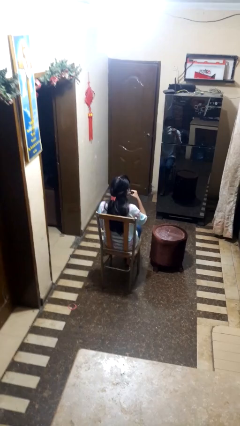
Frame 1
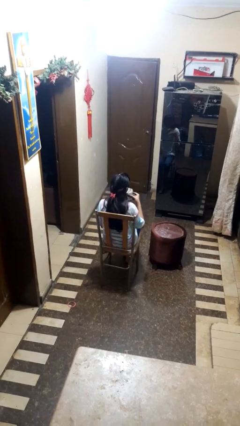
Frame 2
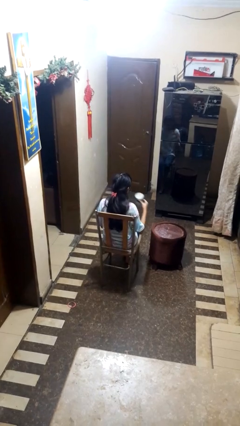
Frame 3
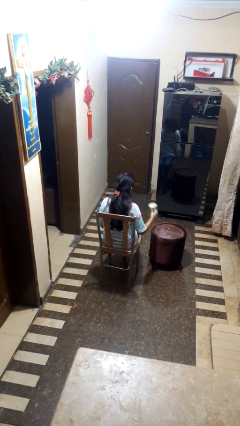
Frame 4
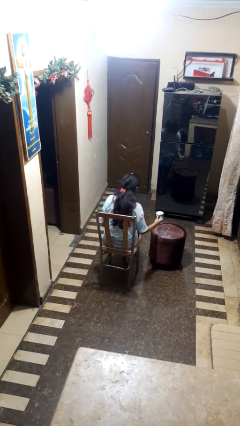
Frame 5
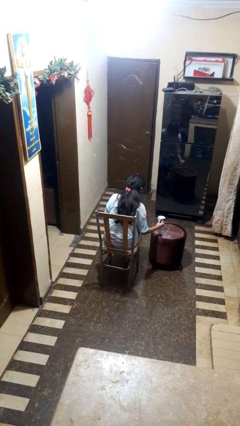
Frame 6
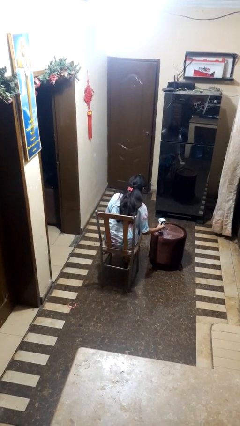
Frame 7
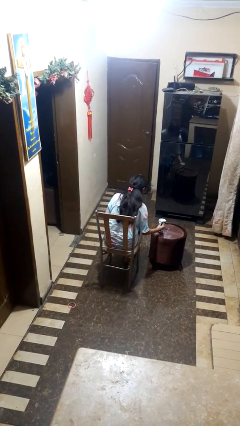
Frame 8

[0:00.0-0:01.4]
person puts down object on table

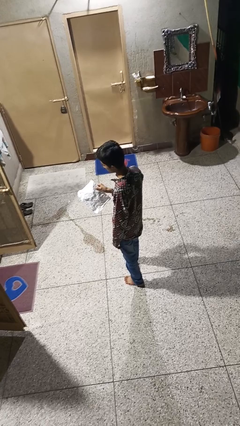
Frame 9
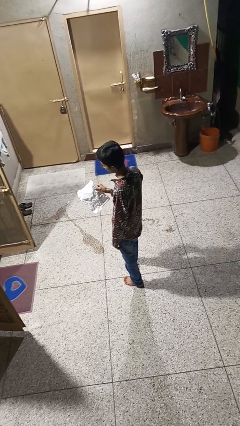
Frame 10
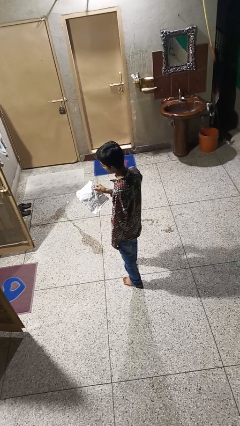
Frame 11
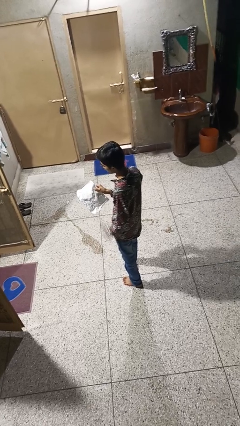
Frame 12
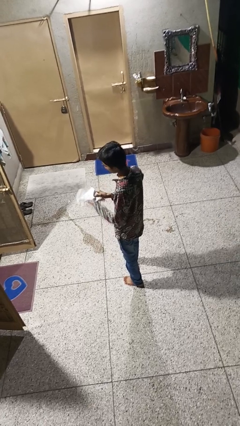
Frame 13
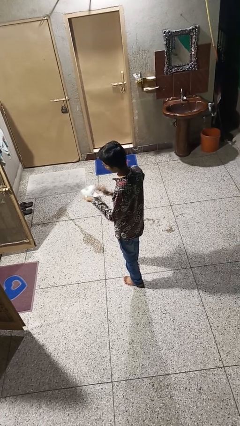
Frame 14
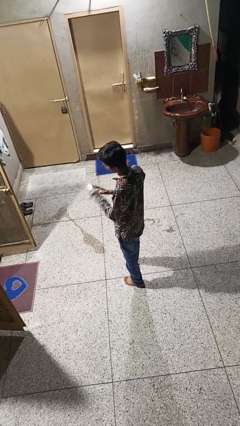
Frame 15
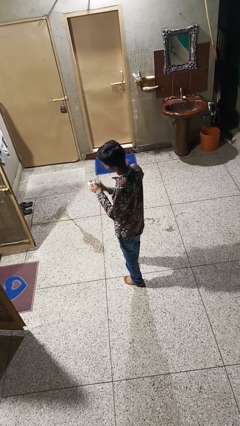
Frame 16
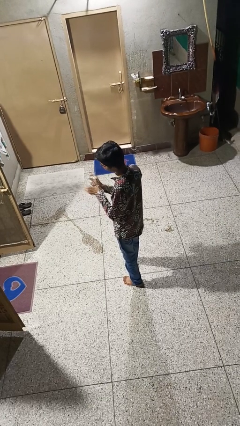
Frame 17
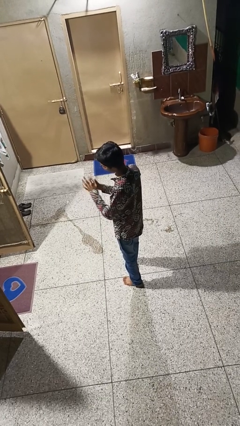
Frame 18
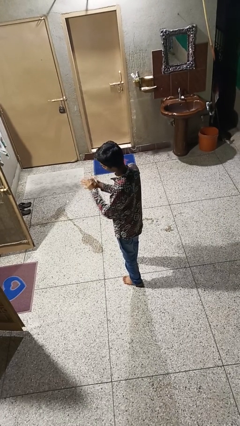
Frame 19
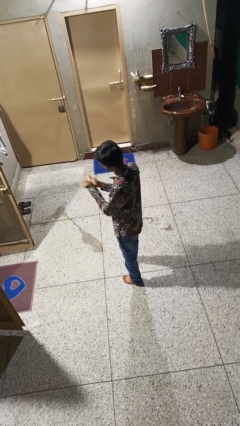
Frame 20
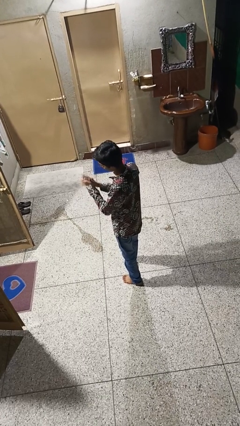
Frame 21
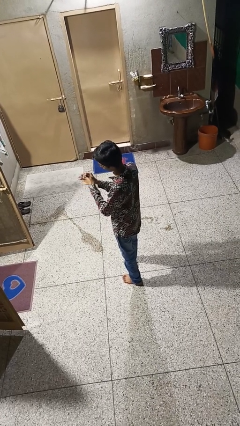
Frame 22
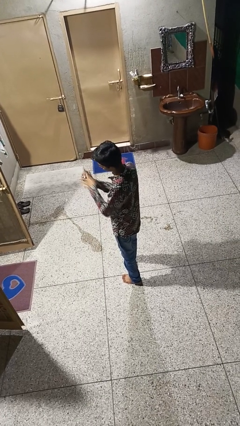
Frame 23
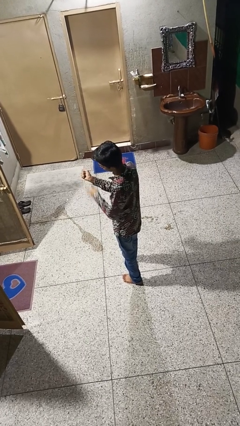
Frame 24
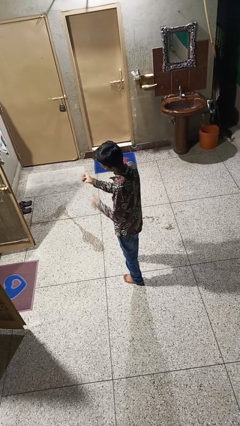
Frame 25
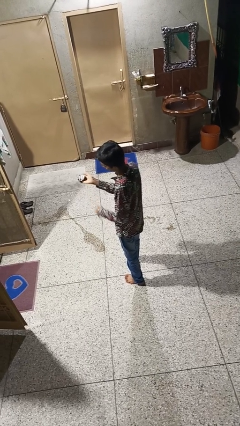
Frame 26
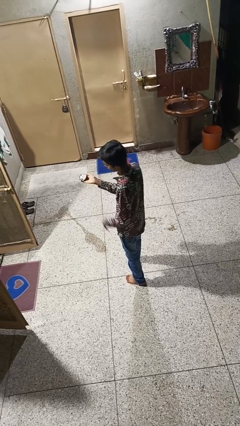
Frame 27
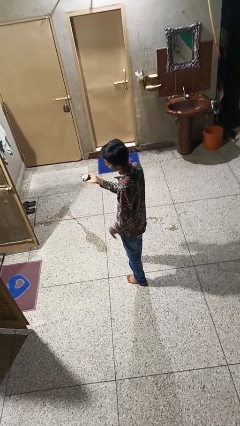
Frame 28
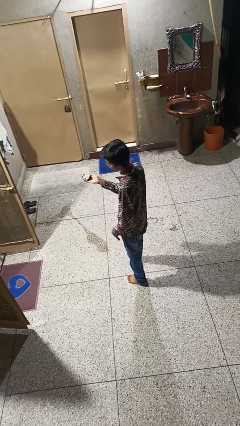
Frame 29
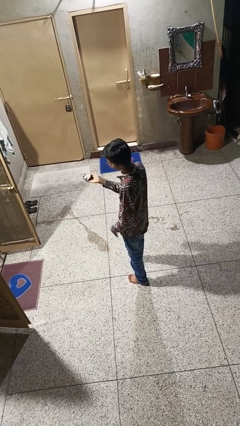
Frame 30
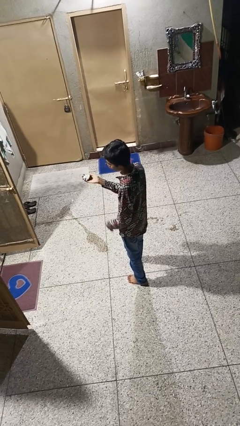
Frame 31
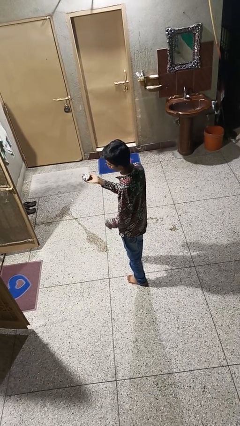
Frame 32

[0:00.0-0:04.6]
person crumples paper

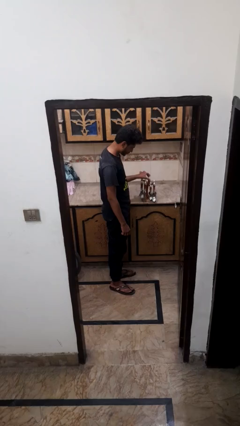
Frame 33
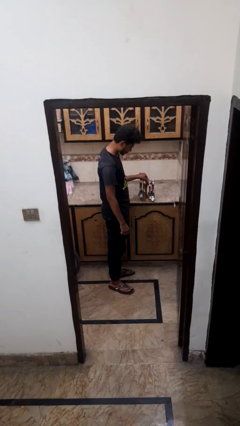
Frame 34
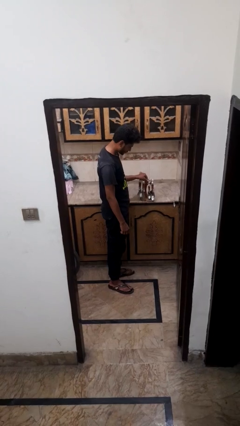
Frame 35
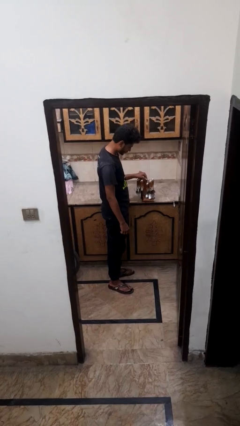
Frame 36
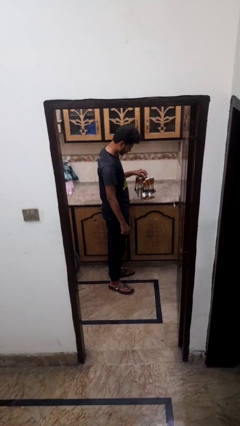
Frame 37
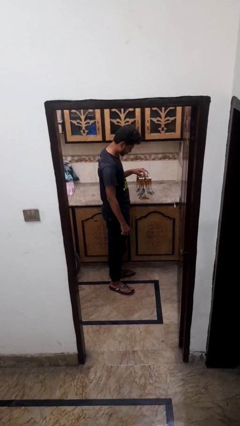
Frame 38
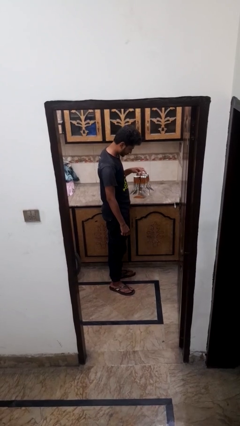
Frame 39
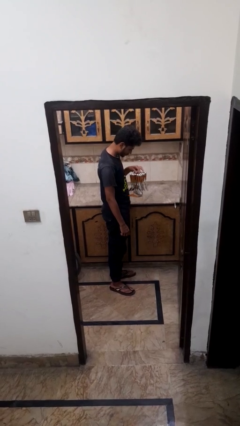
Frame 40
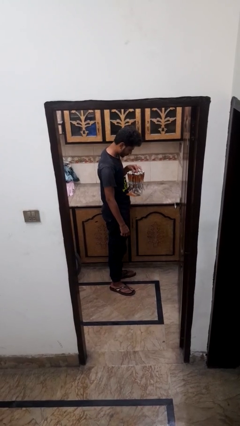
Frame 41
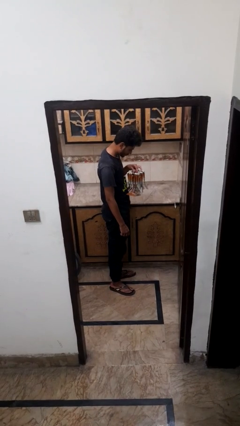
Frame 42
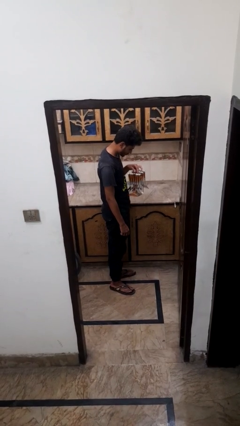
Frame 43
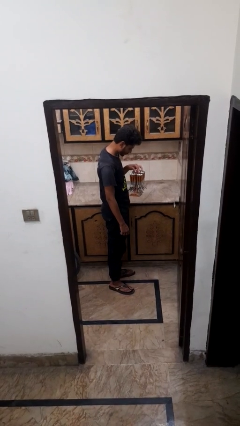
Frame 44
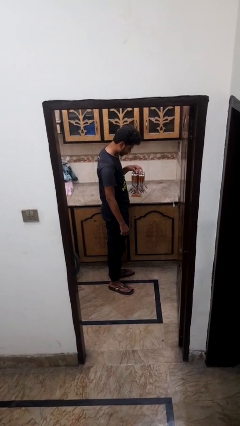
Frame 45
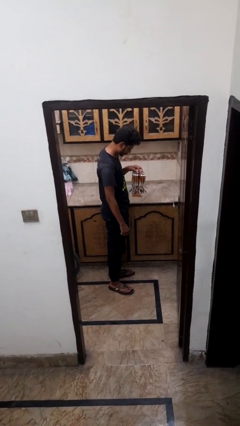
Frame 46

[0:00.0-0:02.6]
person picks up object from countertop

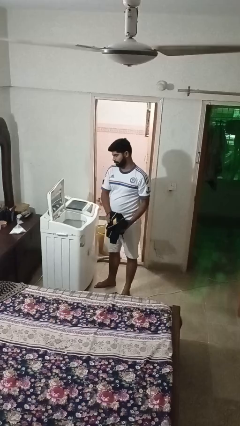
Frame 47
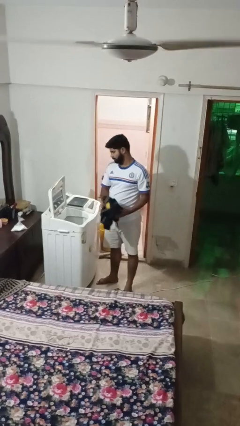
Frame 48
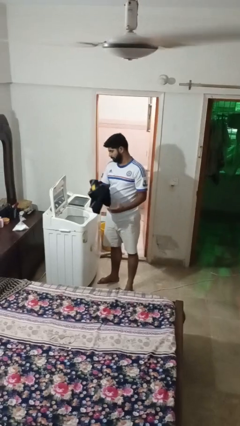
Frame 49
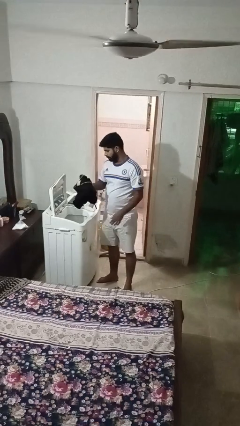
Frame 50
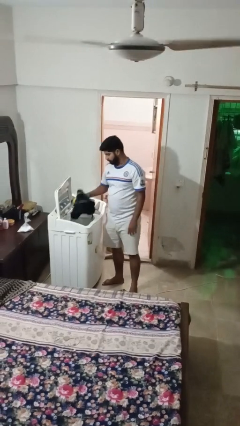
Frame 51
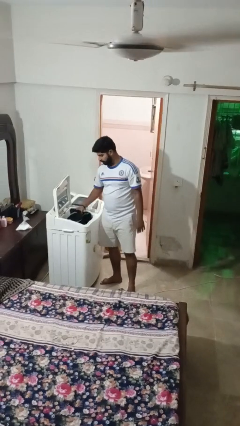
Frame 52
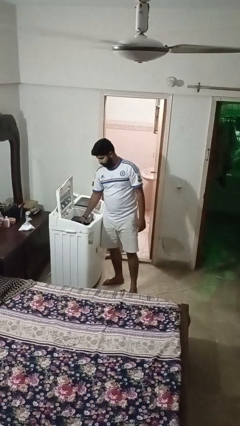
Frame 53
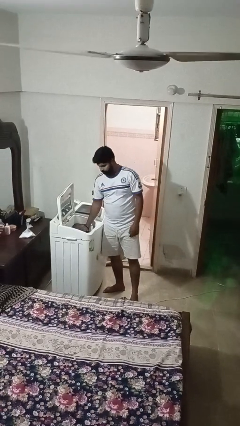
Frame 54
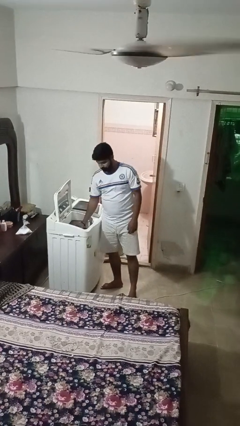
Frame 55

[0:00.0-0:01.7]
person loads clotheswasher

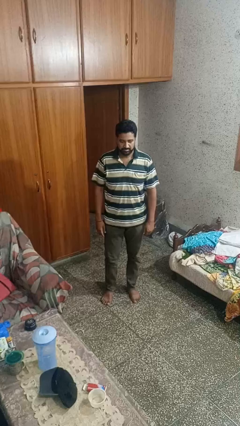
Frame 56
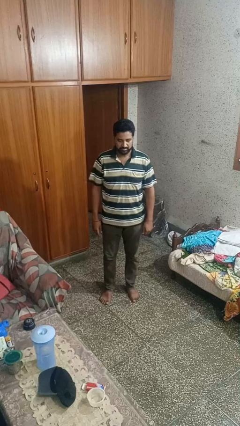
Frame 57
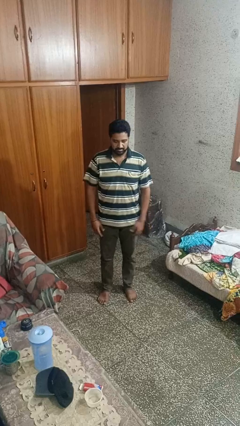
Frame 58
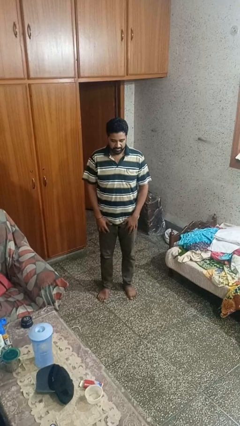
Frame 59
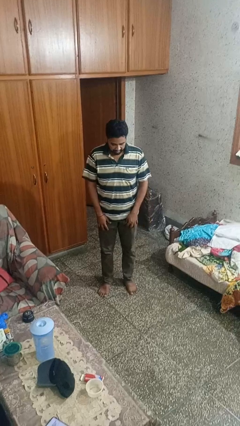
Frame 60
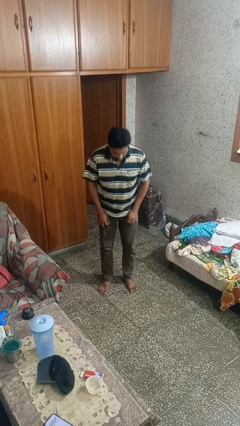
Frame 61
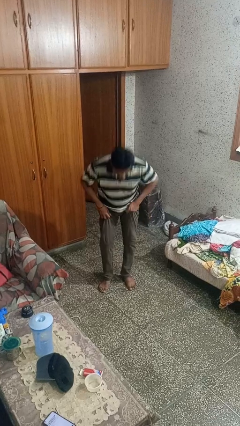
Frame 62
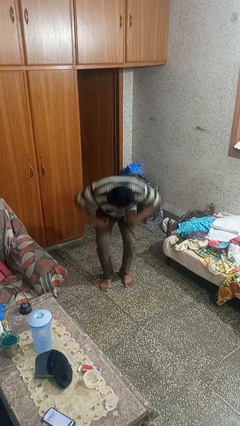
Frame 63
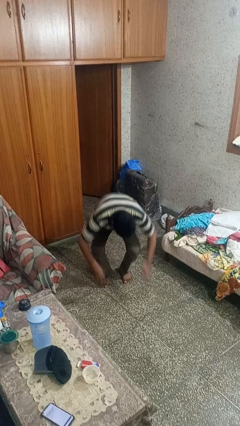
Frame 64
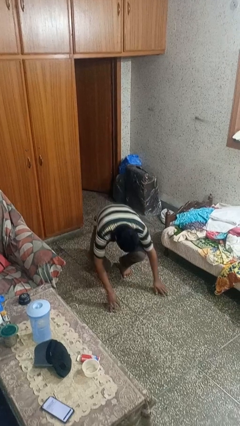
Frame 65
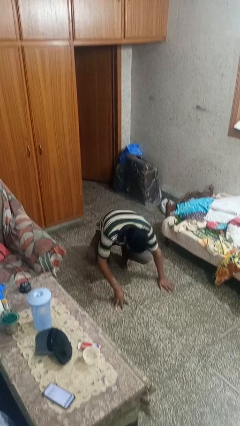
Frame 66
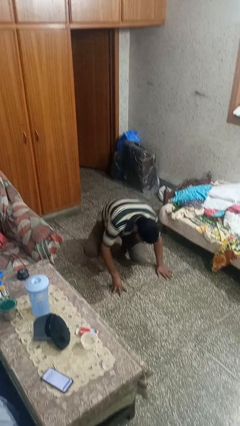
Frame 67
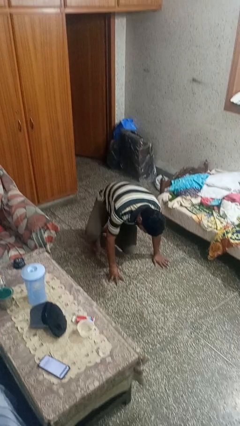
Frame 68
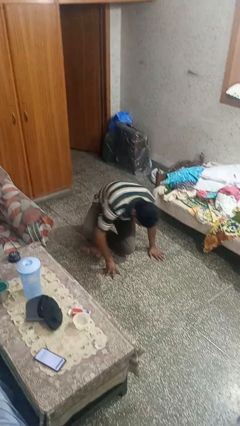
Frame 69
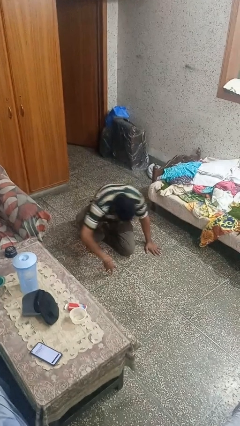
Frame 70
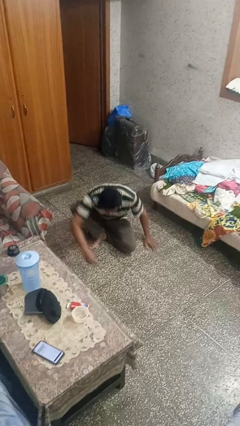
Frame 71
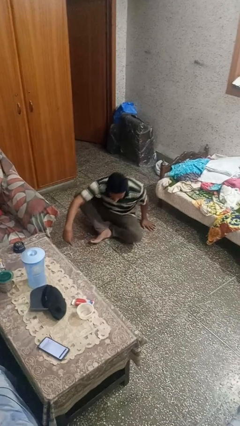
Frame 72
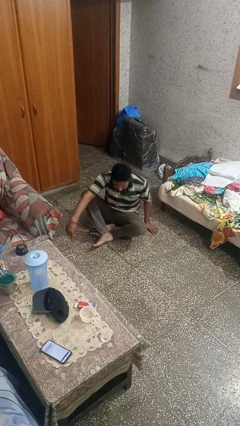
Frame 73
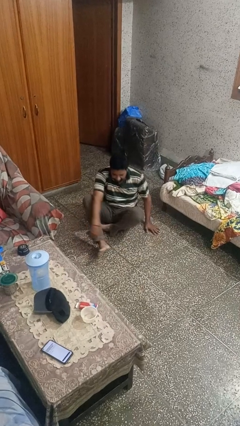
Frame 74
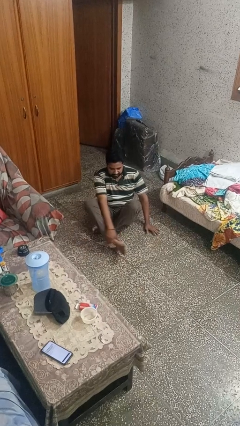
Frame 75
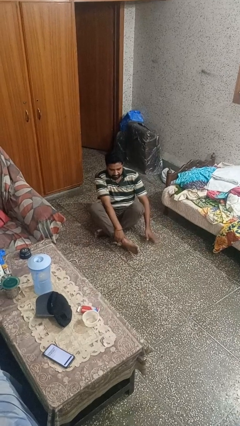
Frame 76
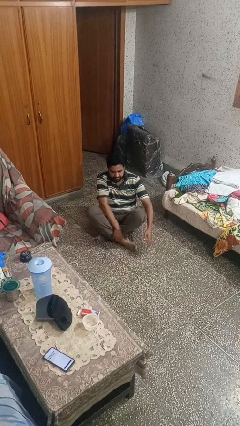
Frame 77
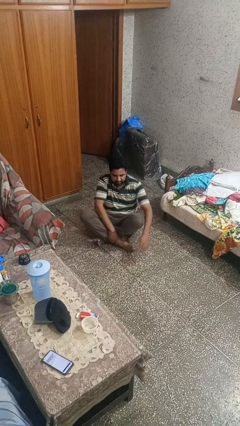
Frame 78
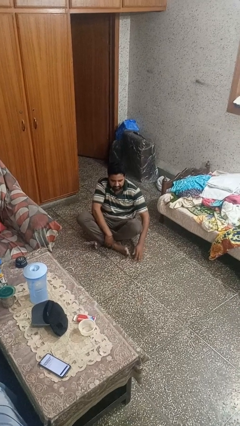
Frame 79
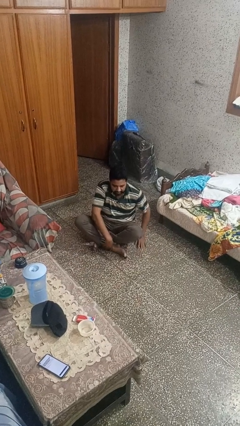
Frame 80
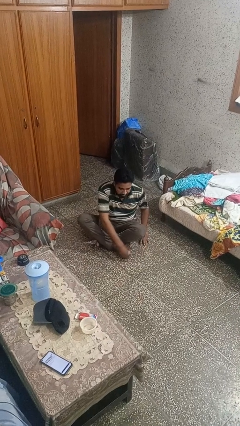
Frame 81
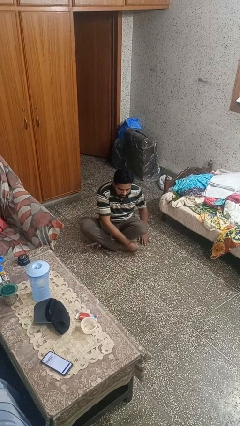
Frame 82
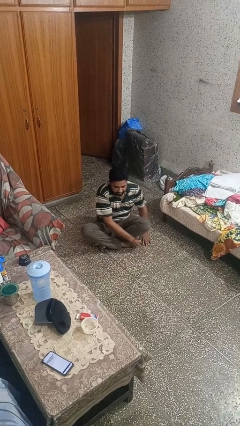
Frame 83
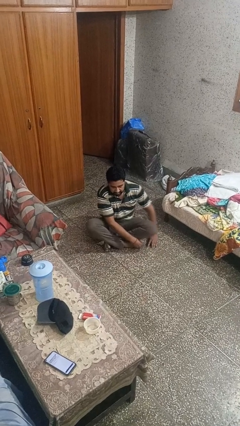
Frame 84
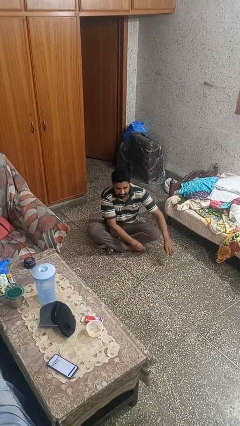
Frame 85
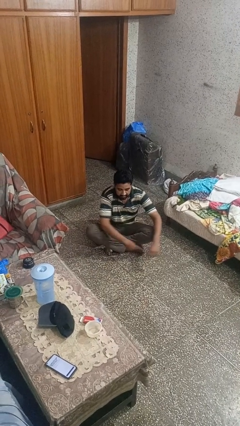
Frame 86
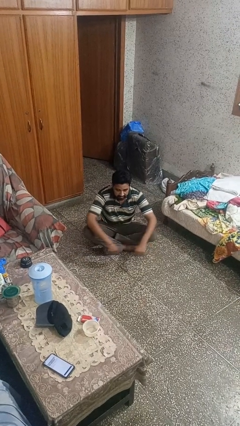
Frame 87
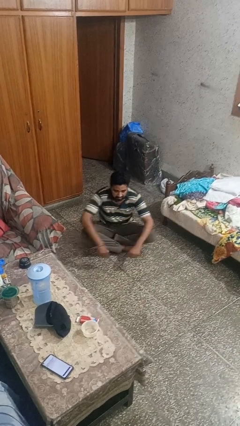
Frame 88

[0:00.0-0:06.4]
person sits crisscross

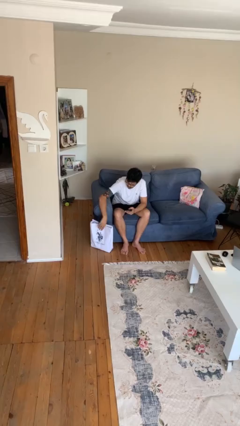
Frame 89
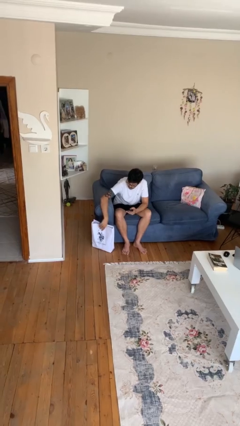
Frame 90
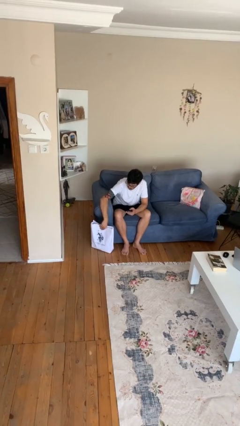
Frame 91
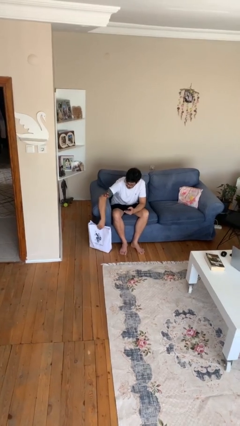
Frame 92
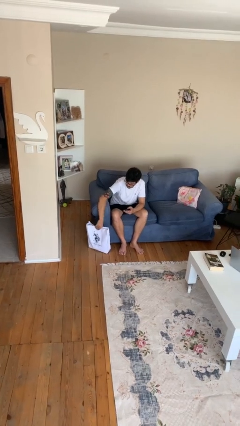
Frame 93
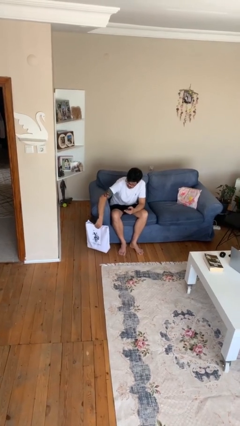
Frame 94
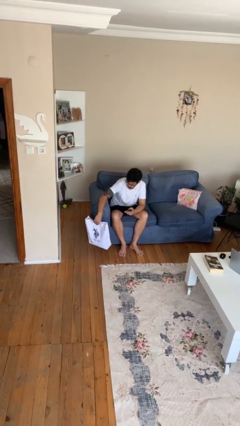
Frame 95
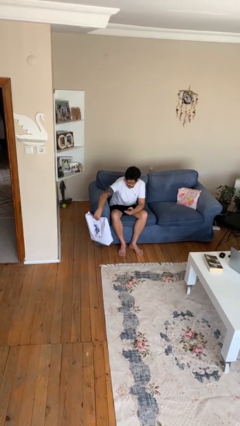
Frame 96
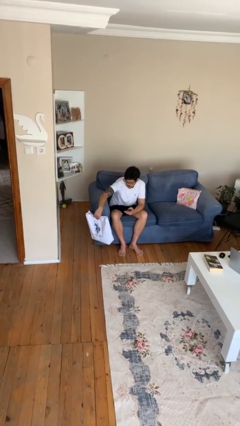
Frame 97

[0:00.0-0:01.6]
person picks up object from floor
